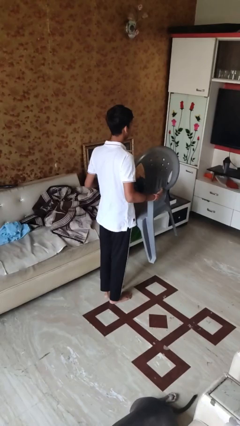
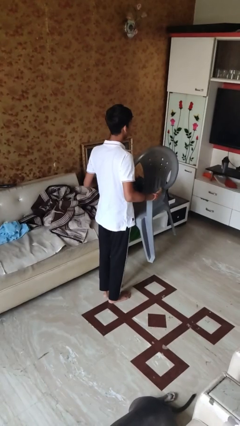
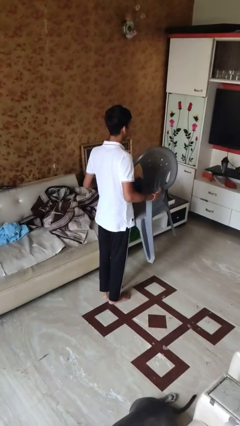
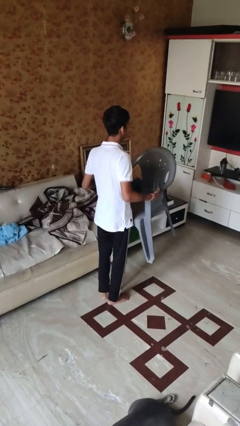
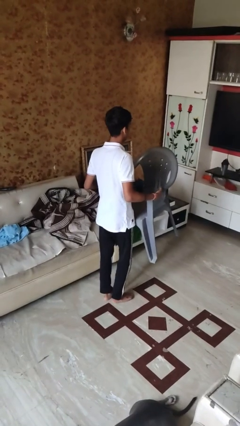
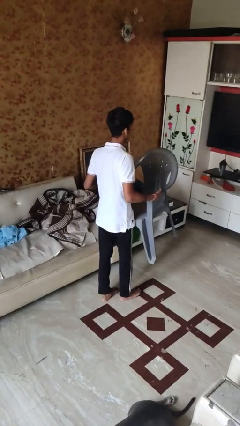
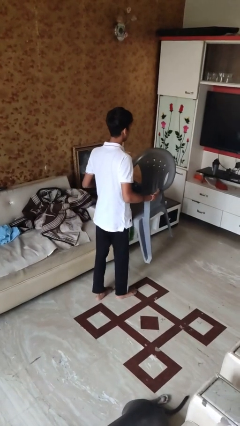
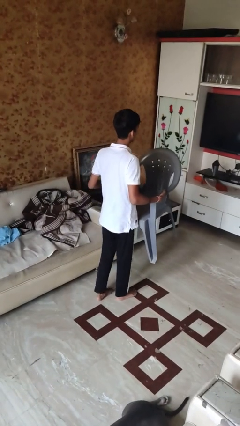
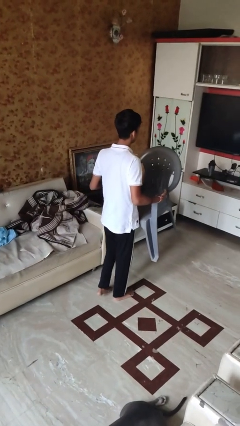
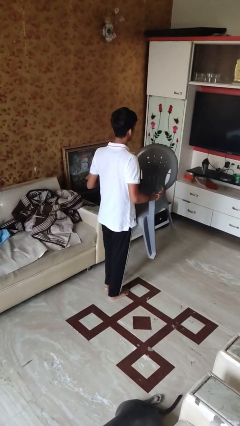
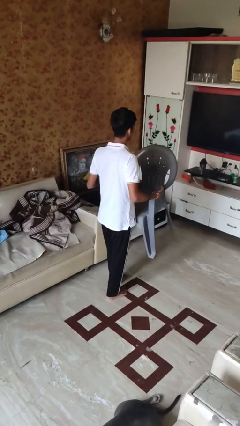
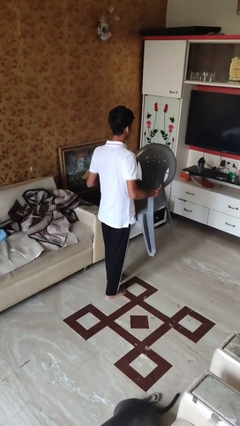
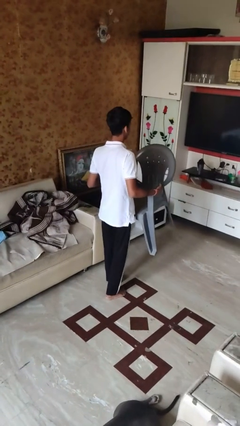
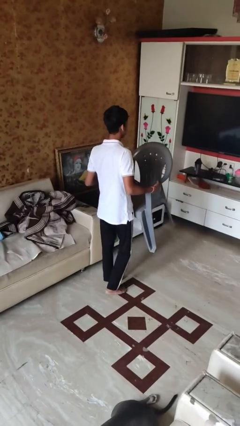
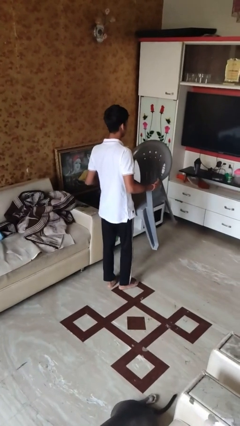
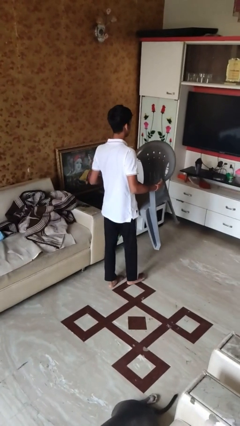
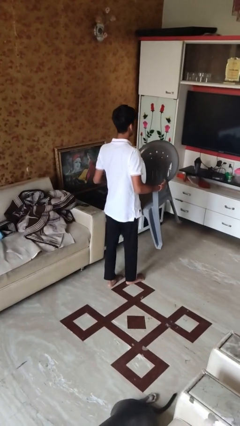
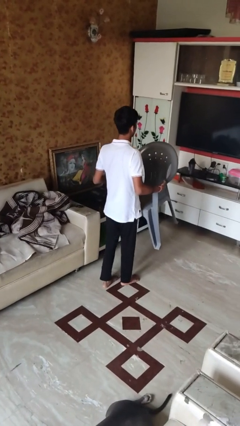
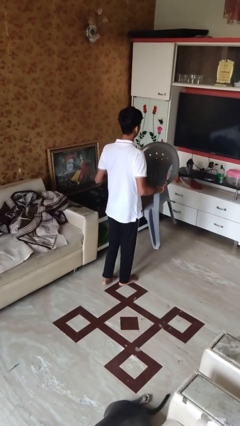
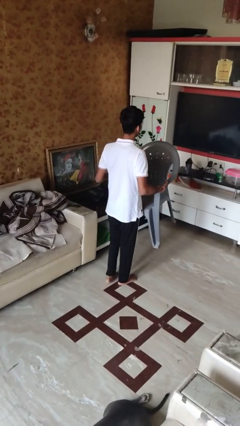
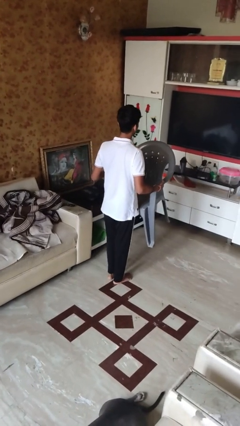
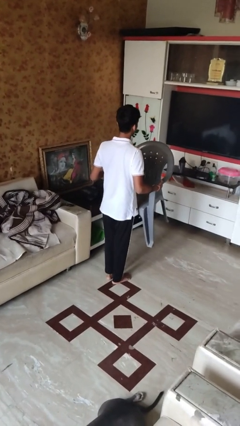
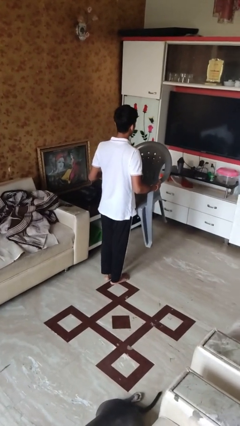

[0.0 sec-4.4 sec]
person carries furniture

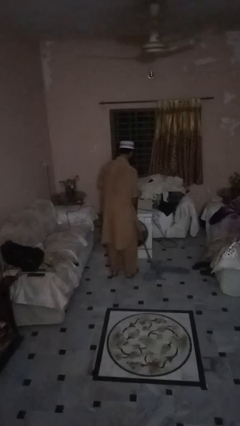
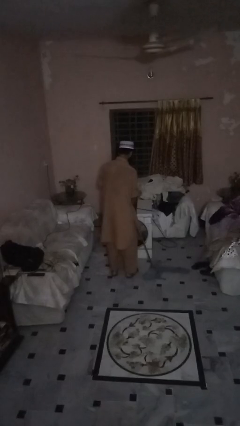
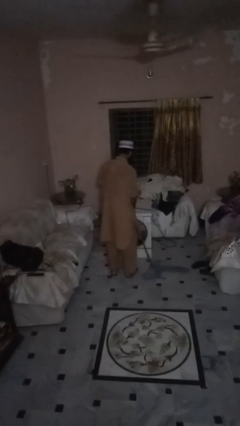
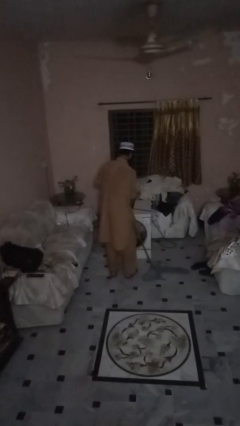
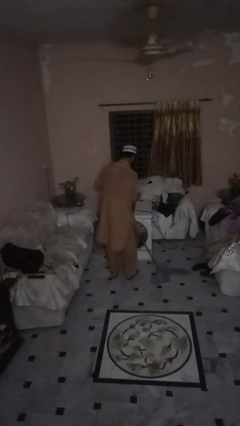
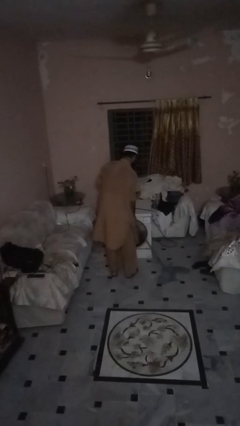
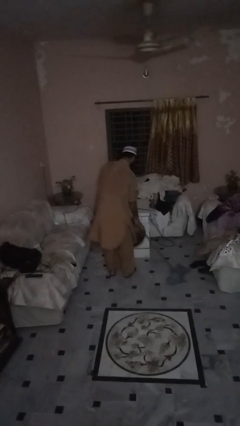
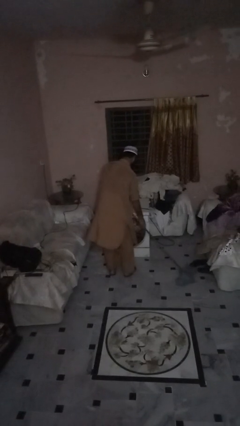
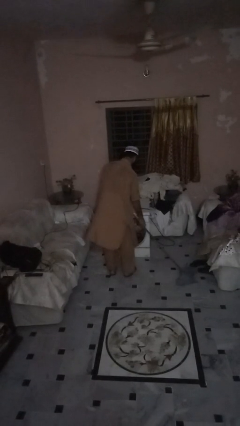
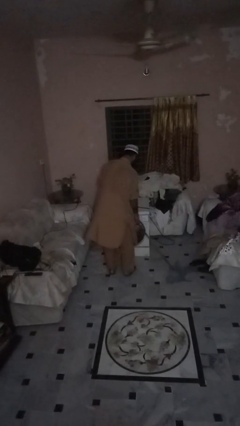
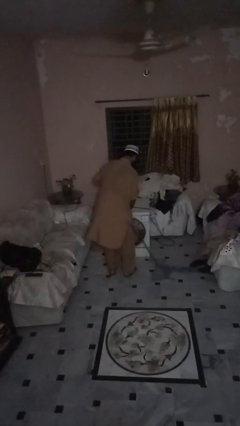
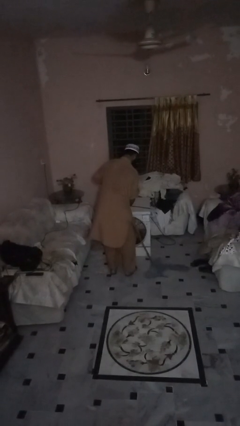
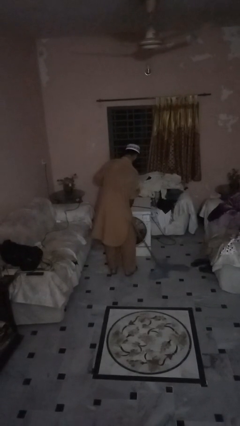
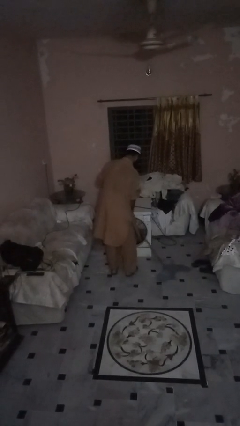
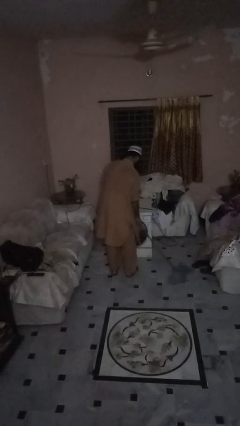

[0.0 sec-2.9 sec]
person mops

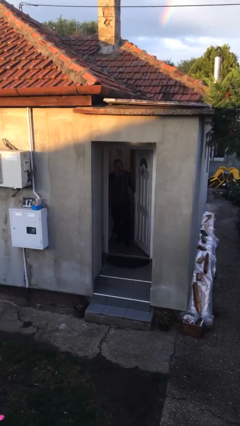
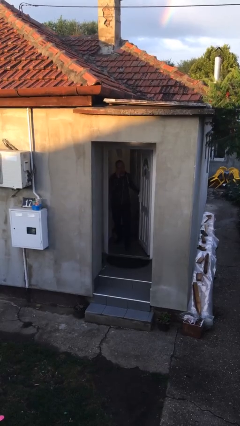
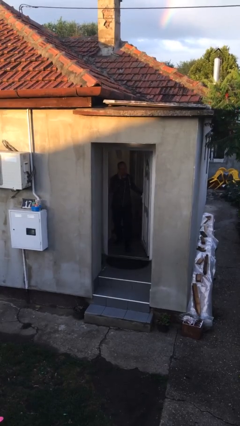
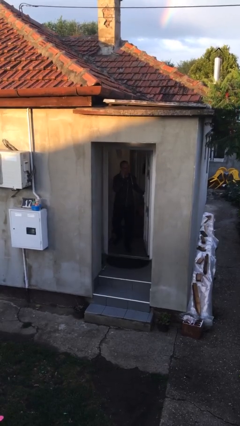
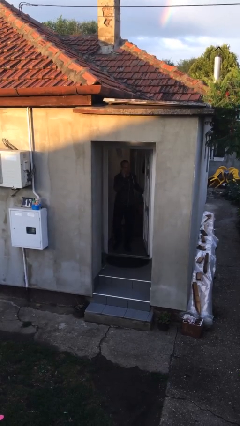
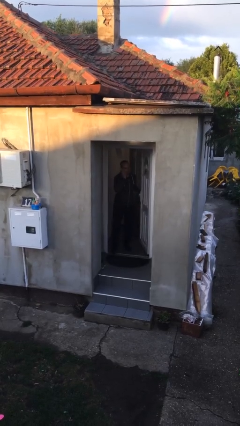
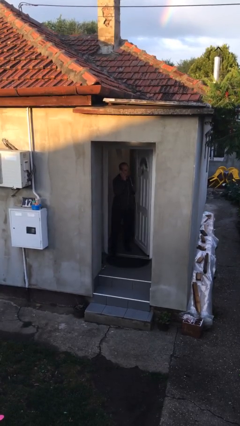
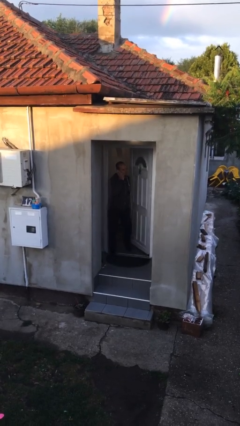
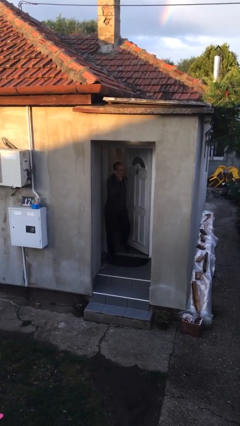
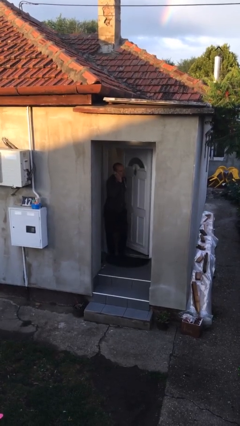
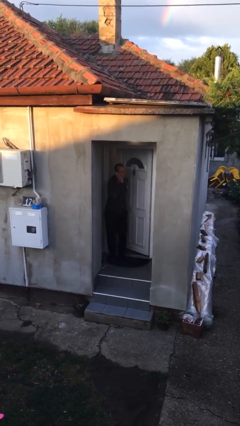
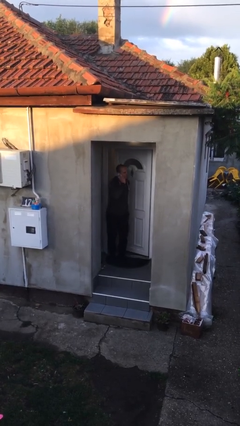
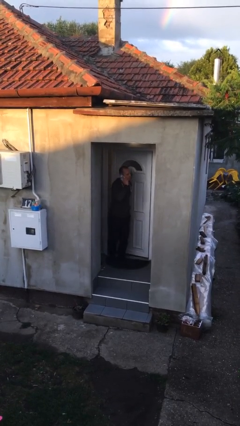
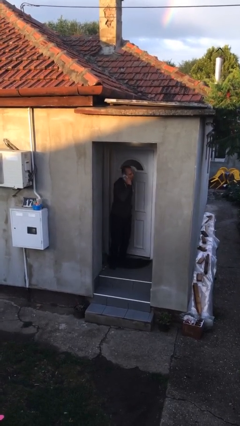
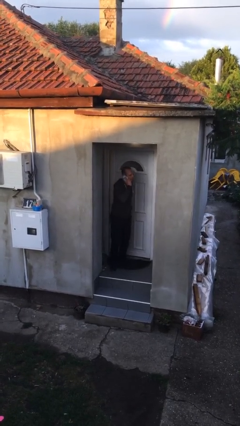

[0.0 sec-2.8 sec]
person enters scene through structure

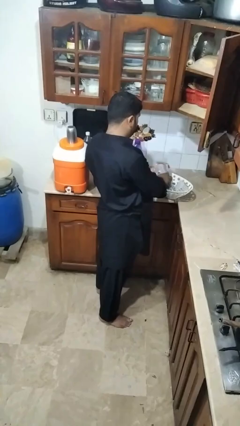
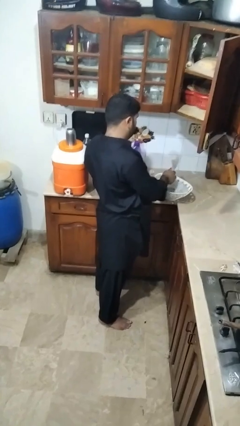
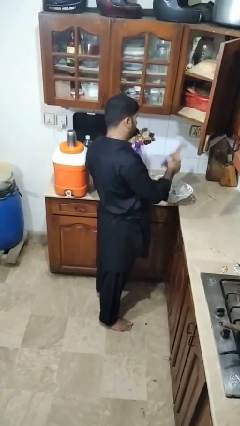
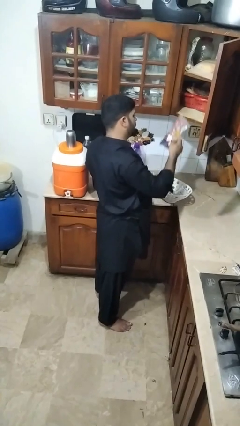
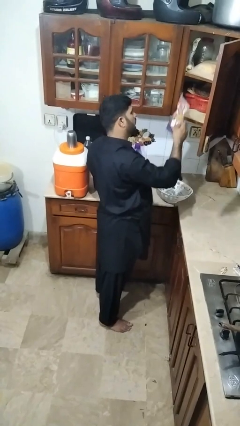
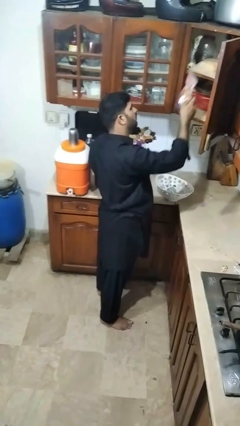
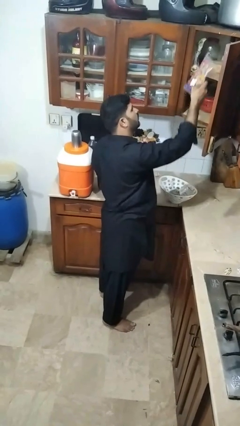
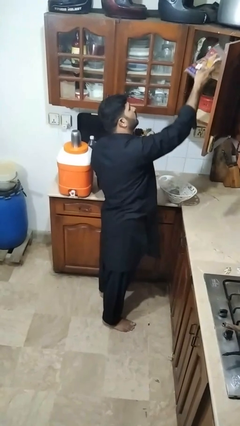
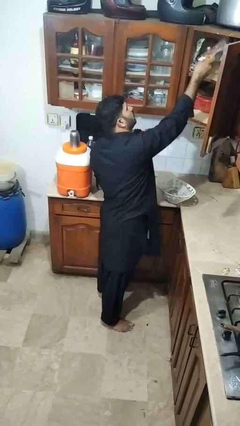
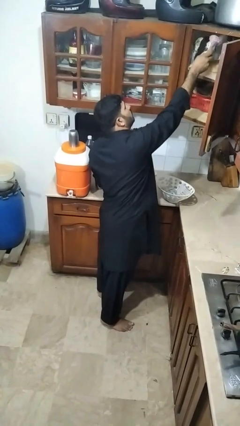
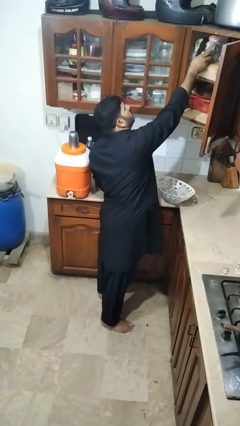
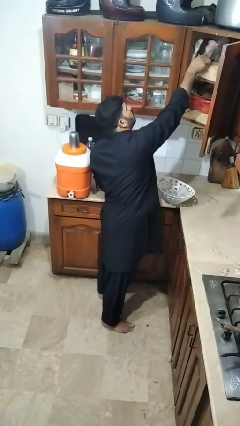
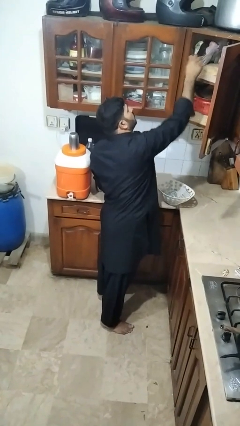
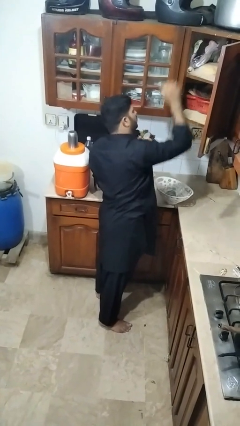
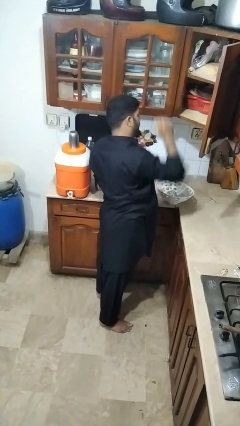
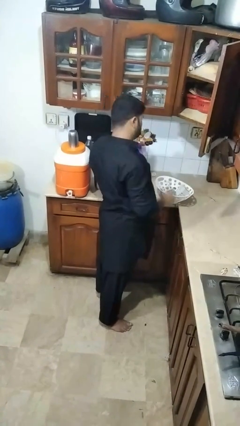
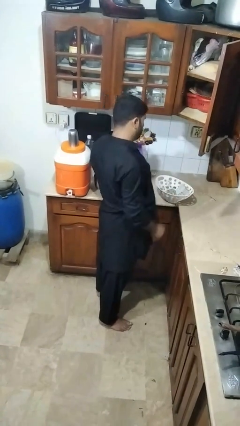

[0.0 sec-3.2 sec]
person loads groceries into cabinet

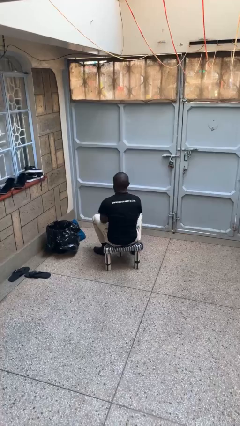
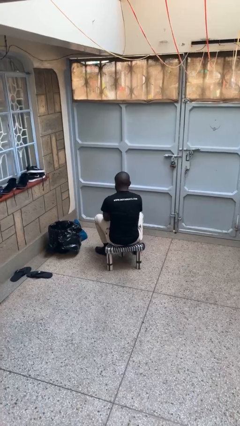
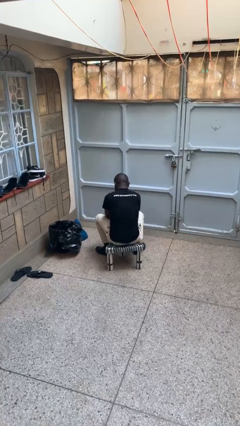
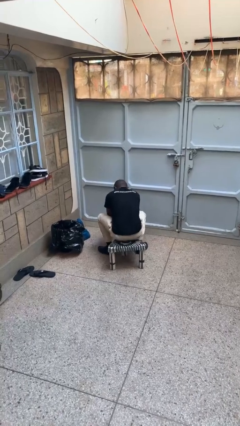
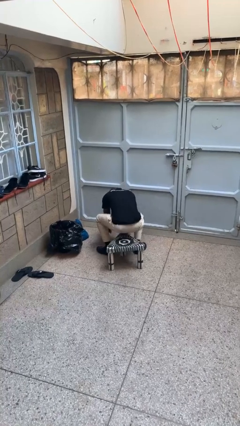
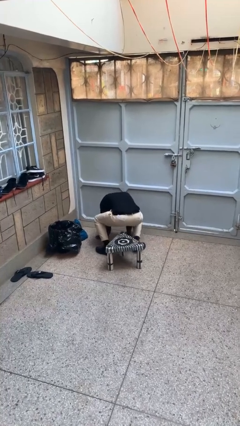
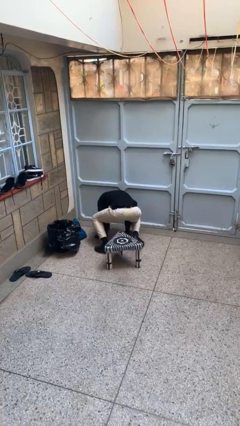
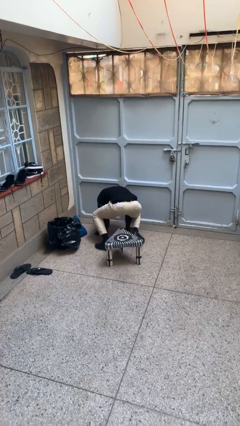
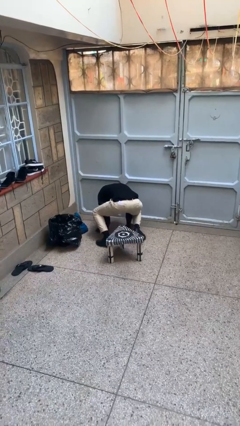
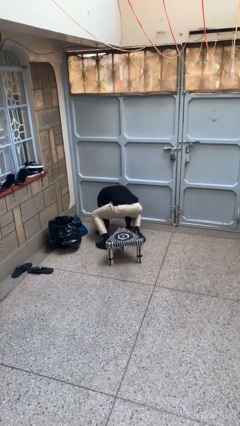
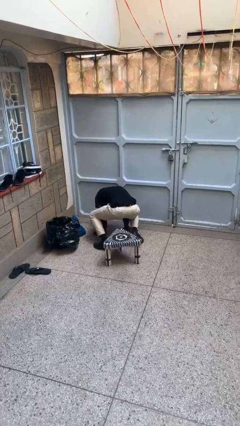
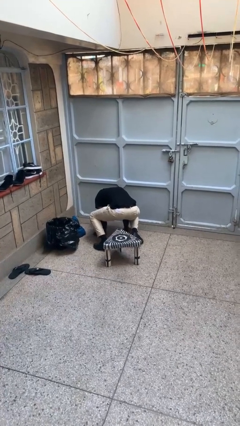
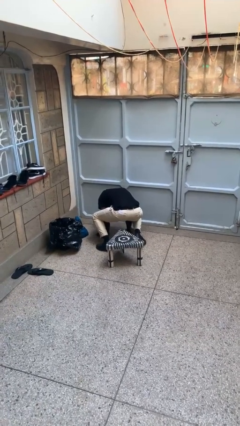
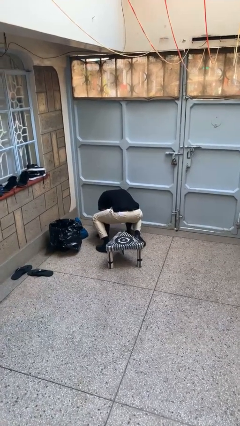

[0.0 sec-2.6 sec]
person falls from chair

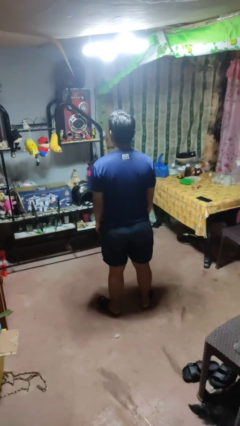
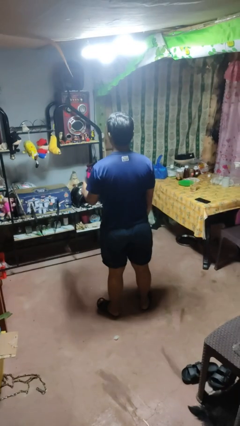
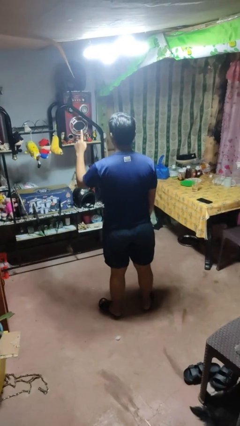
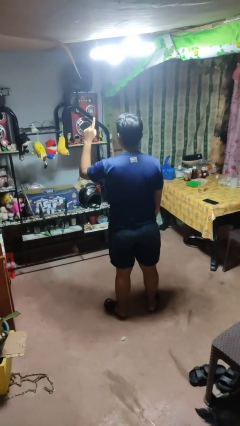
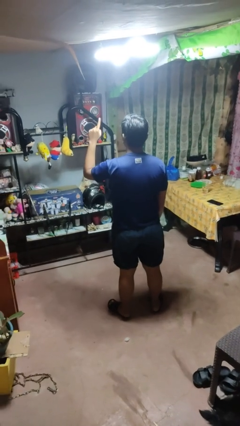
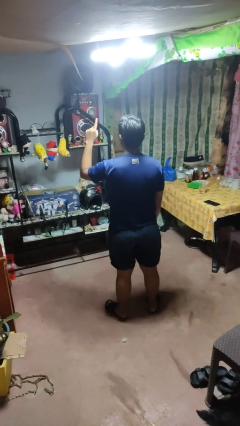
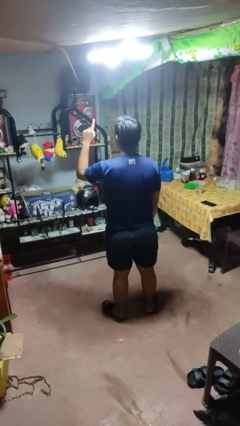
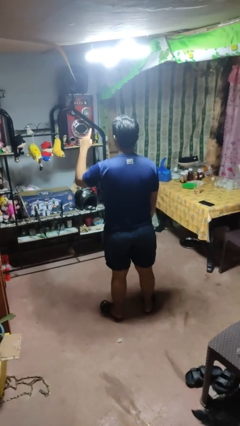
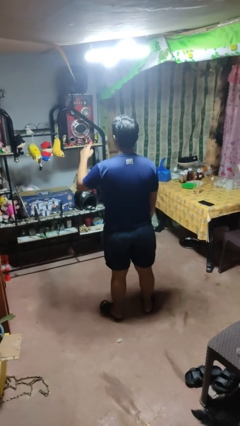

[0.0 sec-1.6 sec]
person gestures number one

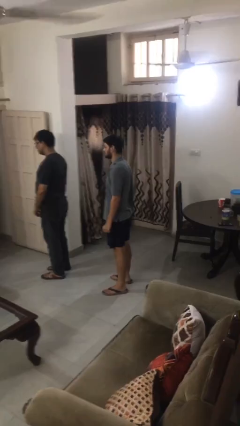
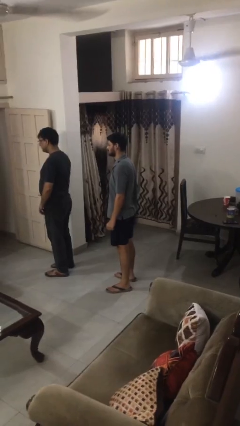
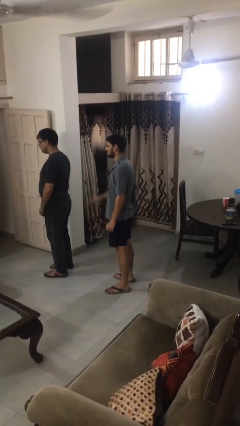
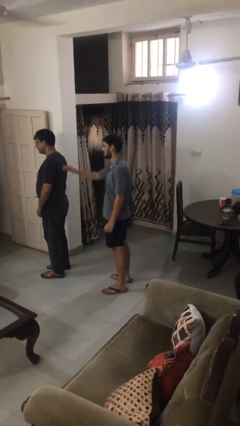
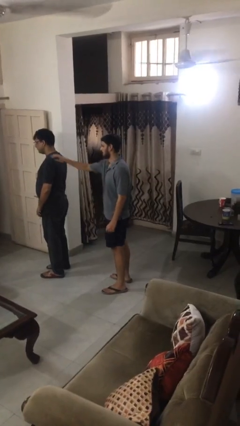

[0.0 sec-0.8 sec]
person grabs person by shoulder
